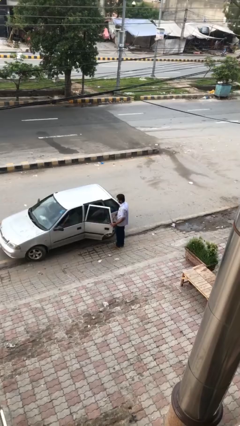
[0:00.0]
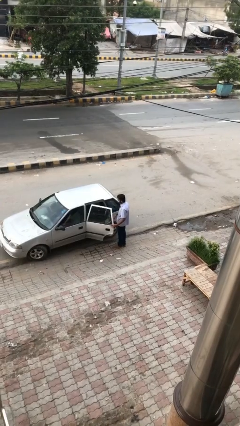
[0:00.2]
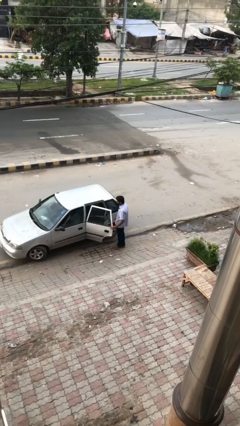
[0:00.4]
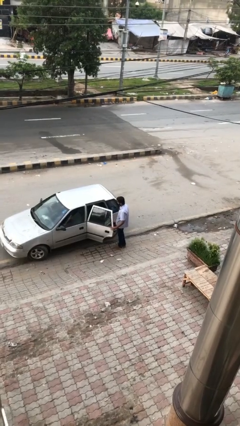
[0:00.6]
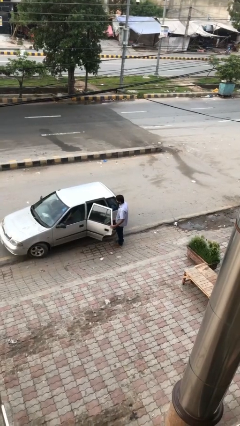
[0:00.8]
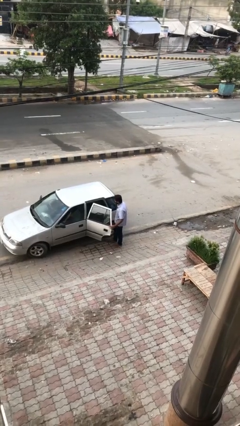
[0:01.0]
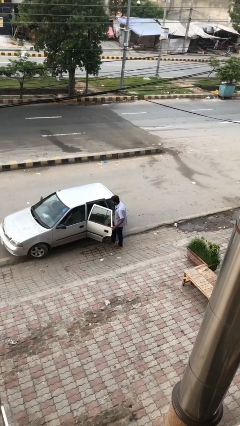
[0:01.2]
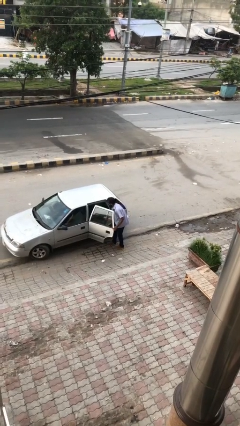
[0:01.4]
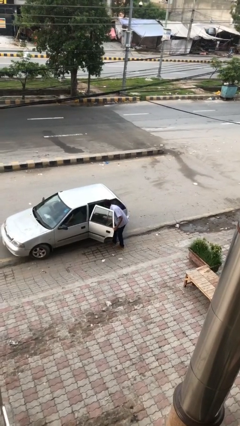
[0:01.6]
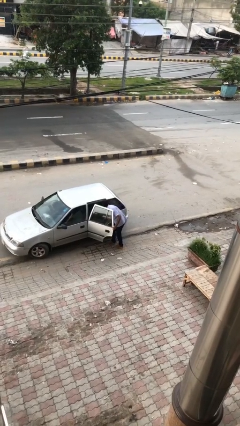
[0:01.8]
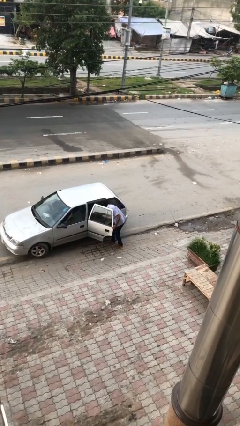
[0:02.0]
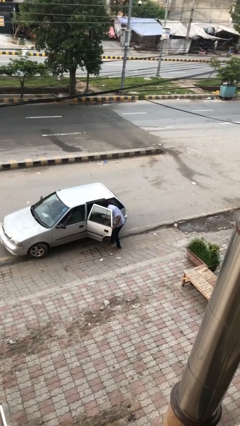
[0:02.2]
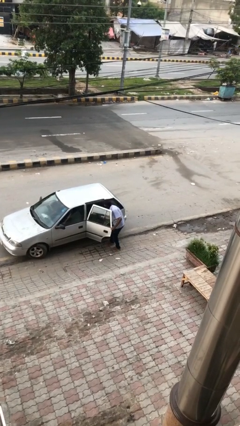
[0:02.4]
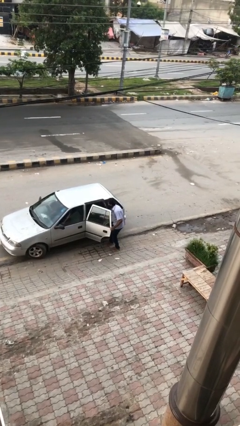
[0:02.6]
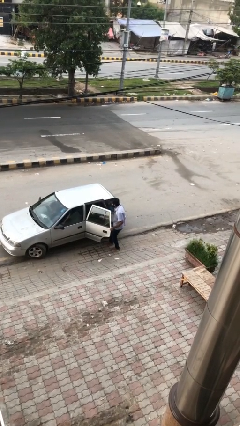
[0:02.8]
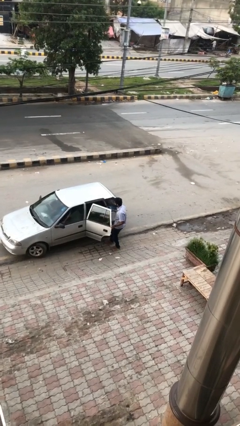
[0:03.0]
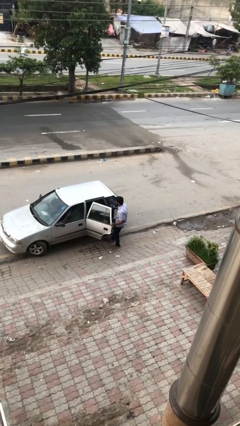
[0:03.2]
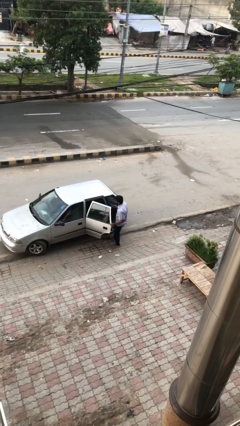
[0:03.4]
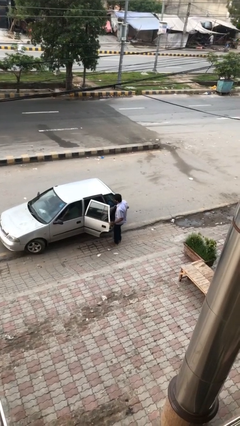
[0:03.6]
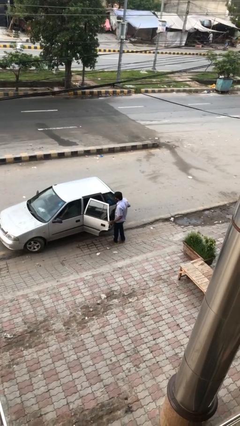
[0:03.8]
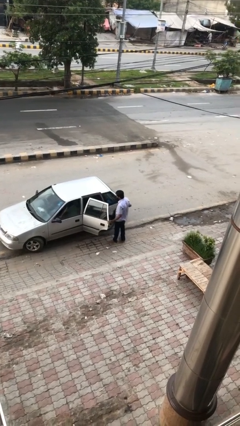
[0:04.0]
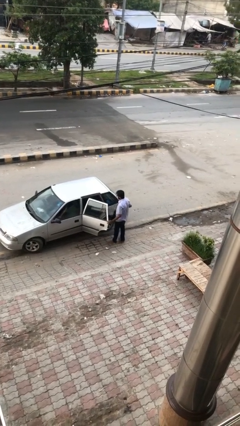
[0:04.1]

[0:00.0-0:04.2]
person unloads car

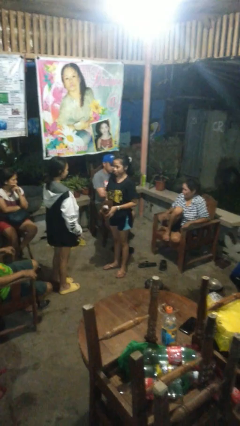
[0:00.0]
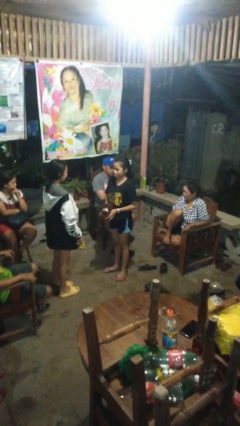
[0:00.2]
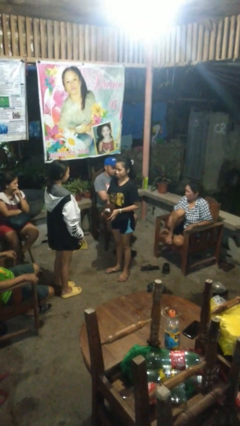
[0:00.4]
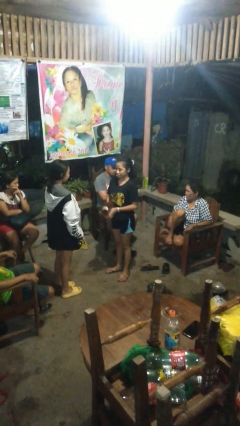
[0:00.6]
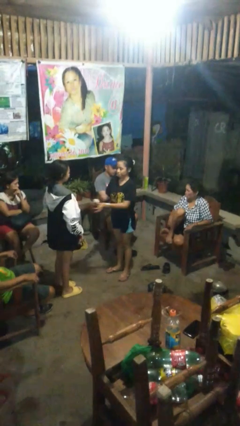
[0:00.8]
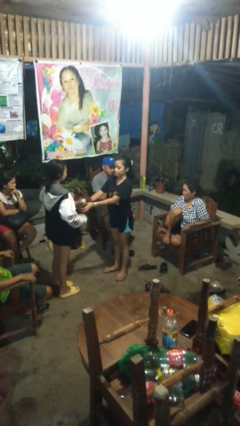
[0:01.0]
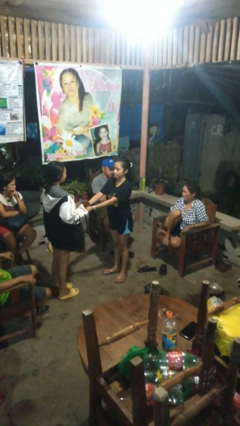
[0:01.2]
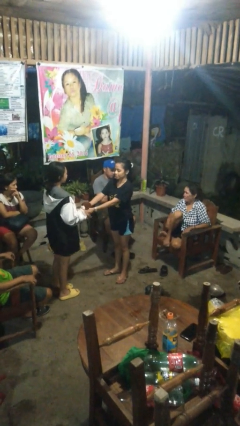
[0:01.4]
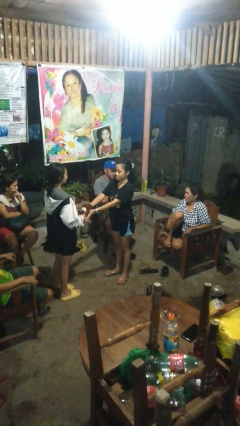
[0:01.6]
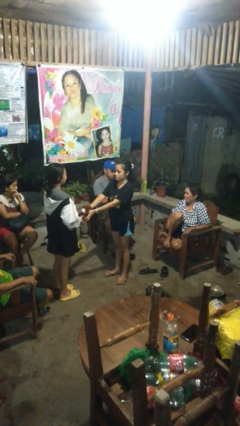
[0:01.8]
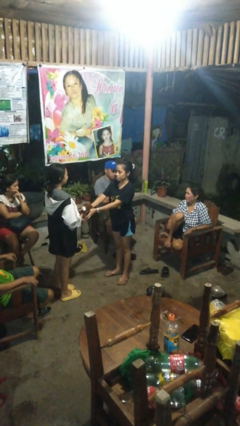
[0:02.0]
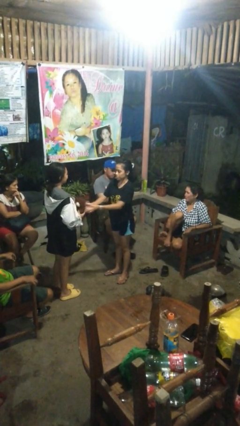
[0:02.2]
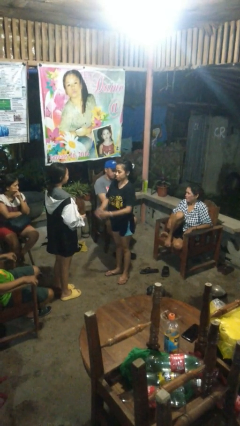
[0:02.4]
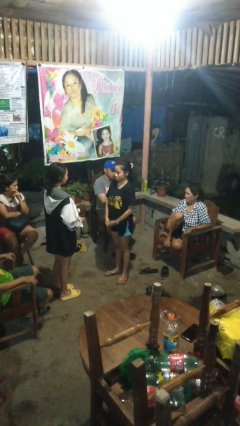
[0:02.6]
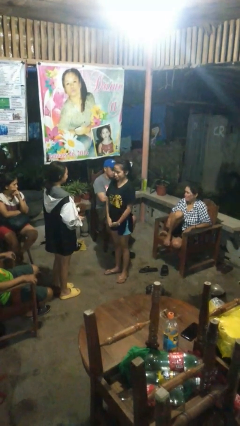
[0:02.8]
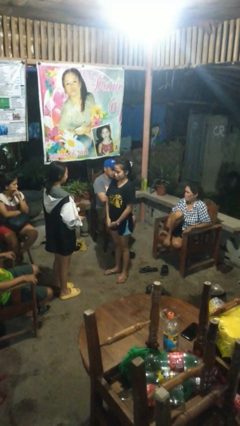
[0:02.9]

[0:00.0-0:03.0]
person transfers object to person

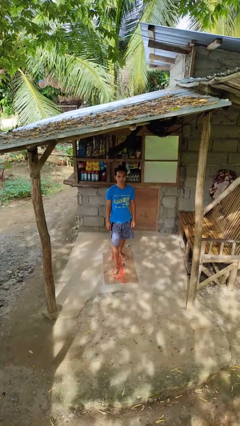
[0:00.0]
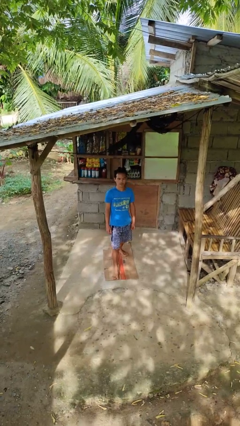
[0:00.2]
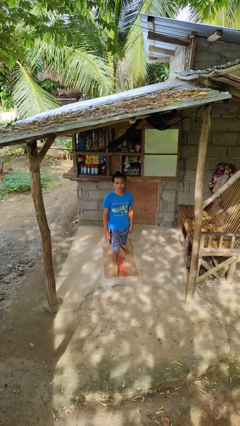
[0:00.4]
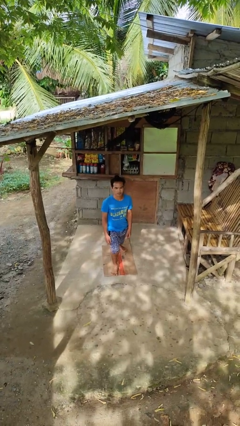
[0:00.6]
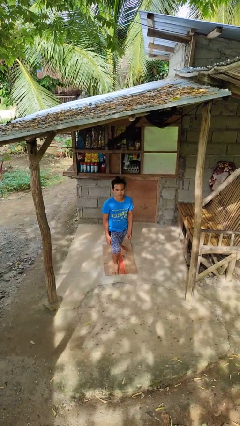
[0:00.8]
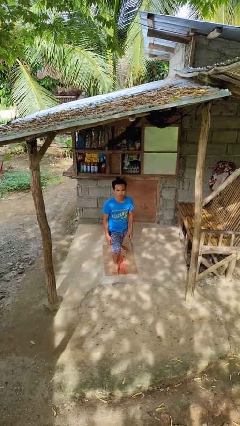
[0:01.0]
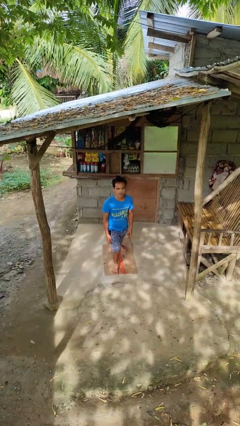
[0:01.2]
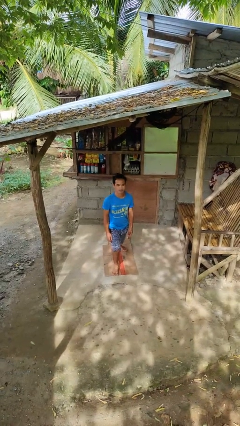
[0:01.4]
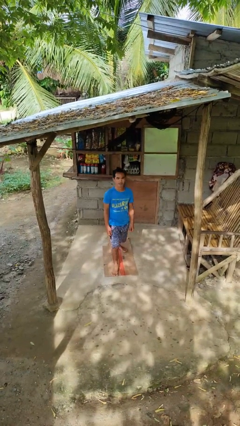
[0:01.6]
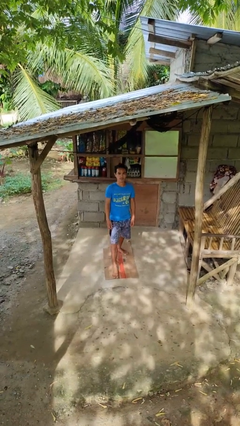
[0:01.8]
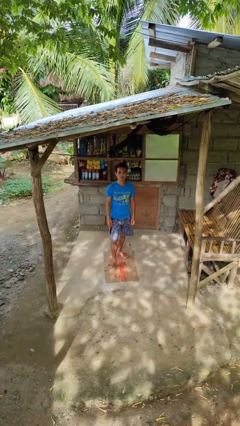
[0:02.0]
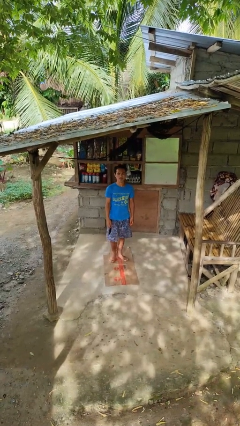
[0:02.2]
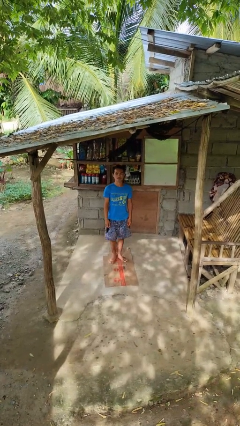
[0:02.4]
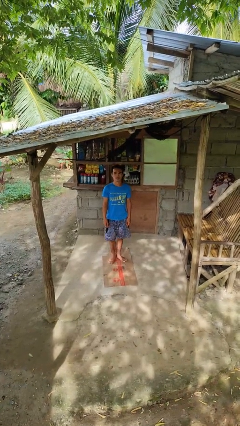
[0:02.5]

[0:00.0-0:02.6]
person exercises with lunges

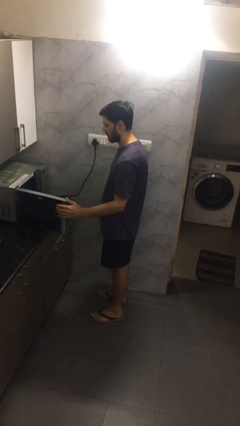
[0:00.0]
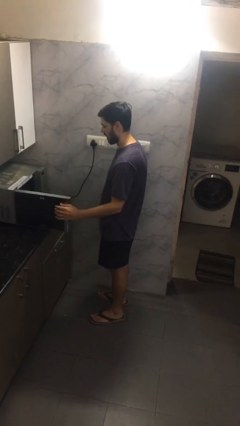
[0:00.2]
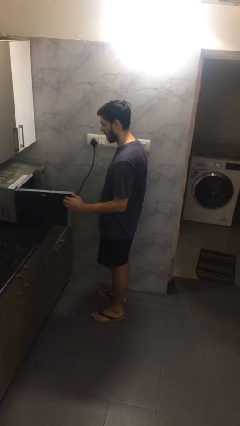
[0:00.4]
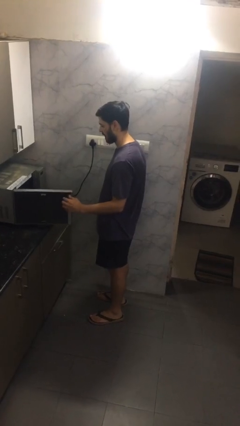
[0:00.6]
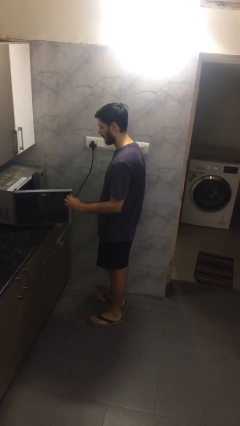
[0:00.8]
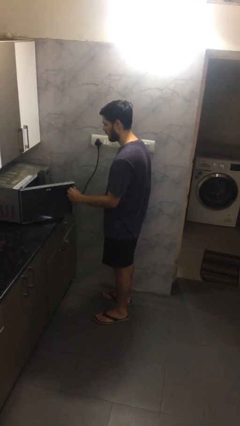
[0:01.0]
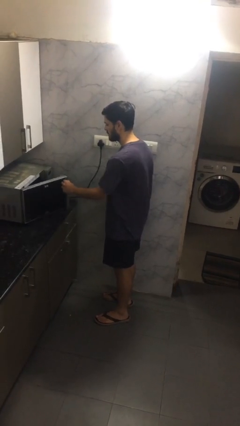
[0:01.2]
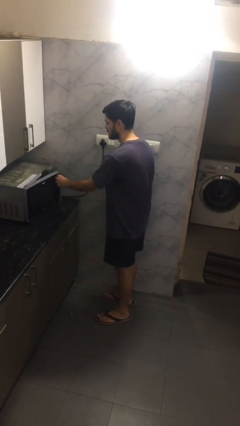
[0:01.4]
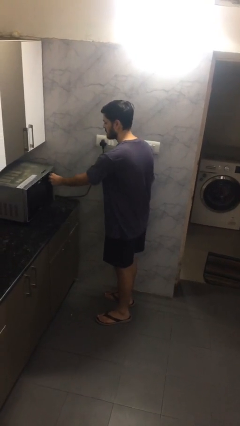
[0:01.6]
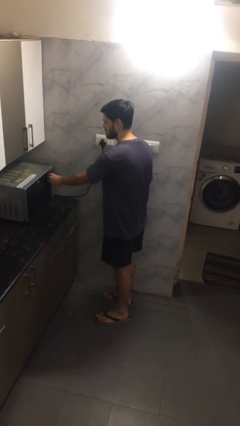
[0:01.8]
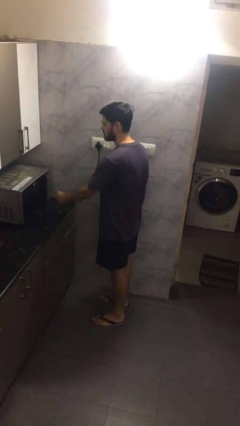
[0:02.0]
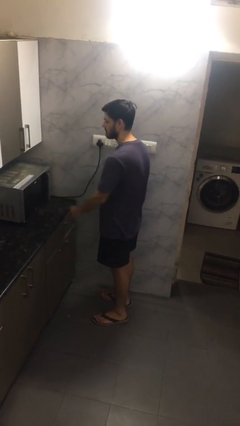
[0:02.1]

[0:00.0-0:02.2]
person closes microwave

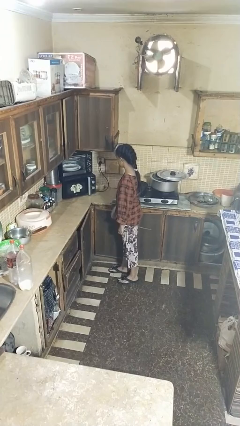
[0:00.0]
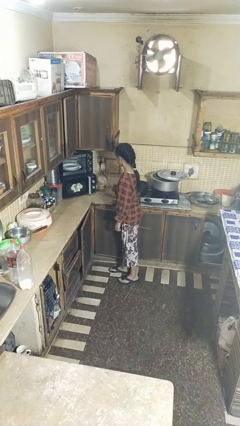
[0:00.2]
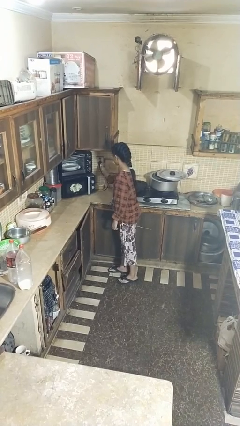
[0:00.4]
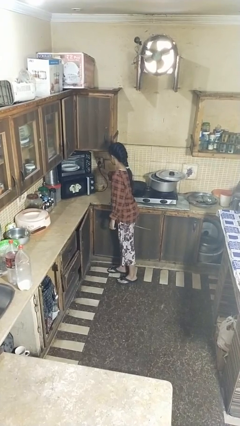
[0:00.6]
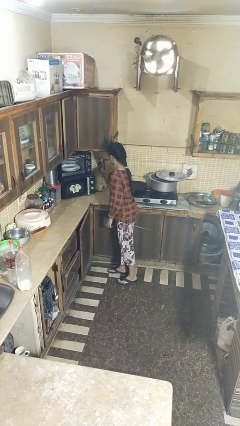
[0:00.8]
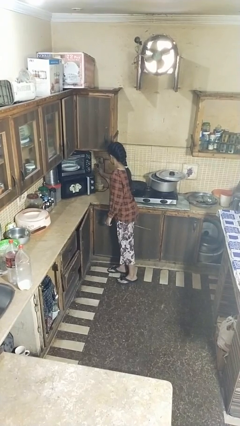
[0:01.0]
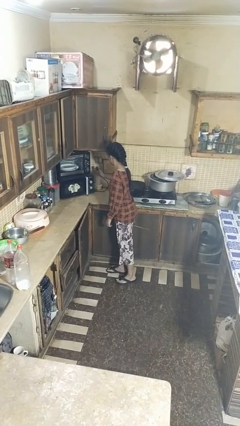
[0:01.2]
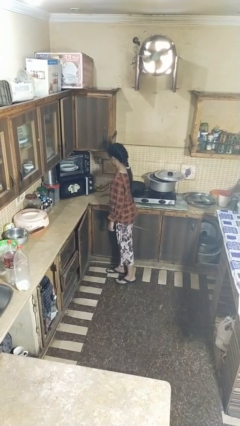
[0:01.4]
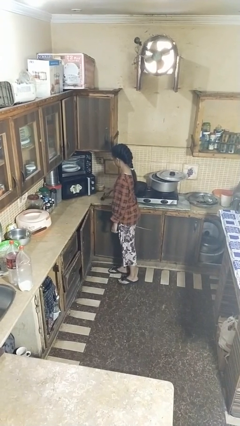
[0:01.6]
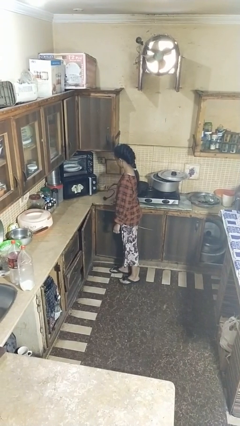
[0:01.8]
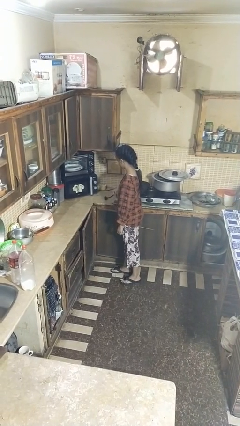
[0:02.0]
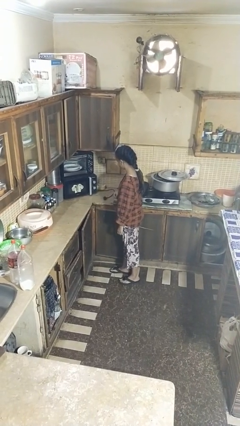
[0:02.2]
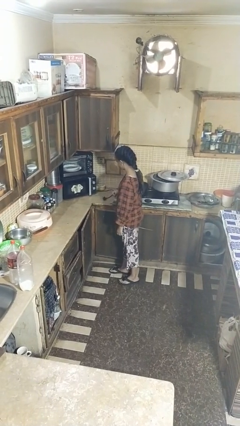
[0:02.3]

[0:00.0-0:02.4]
person unplugs from electrical socket

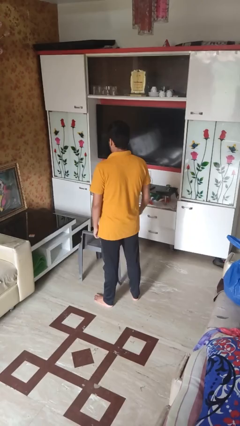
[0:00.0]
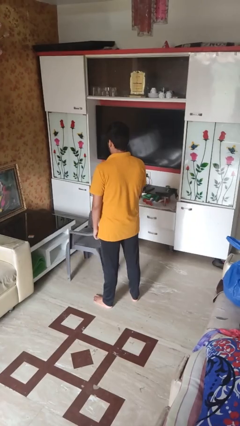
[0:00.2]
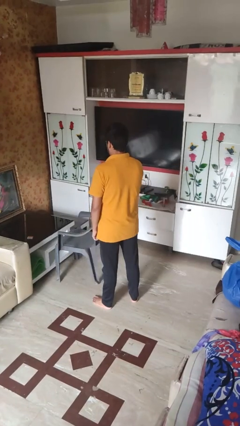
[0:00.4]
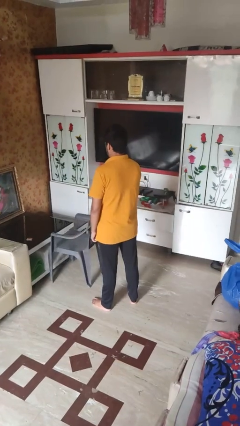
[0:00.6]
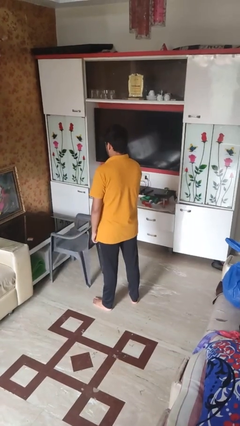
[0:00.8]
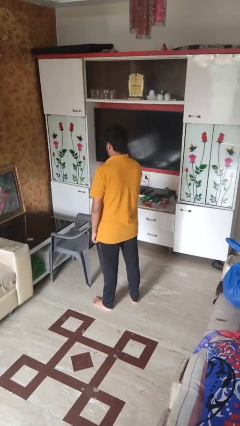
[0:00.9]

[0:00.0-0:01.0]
person pushes in chair

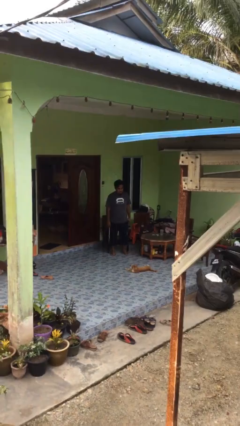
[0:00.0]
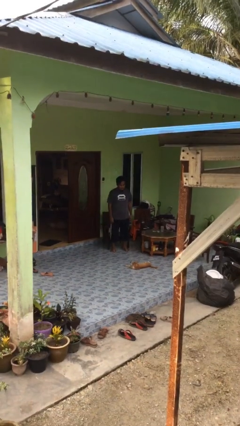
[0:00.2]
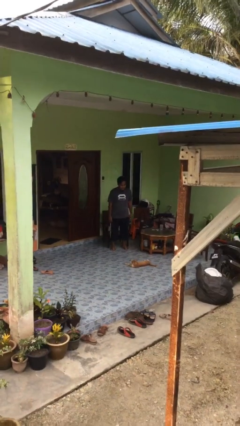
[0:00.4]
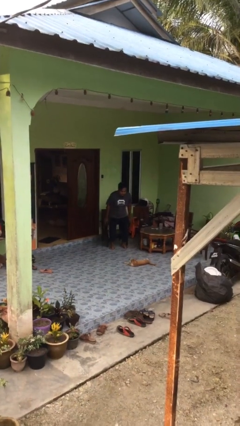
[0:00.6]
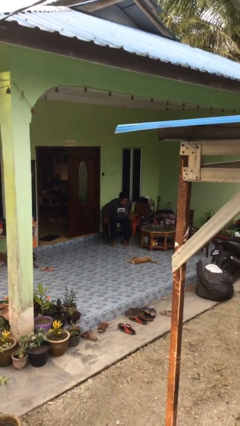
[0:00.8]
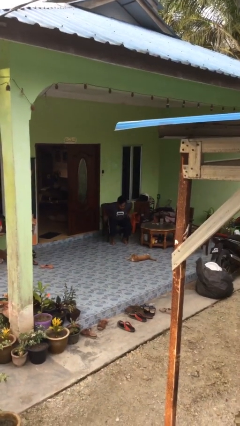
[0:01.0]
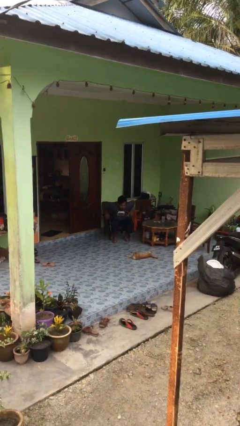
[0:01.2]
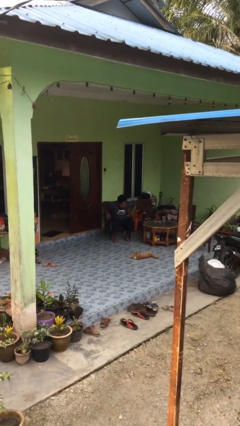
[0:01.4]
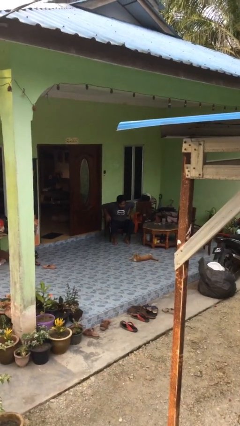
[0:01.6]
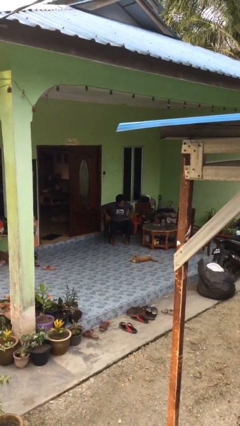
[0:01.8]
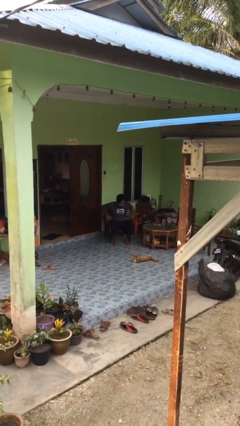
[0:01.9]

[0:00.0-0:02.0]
person sits down
